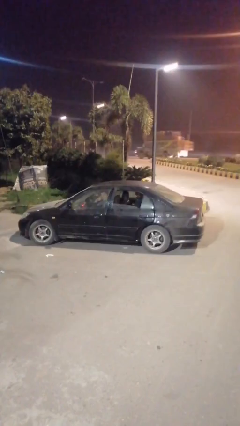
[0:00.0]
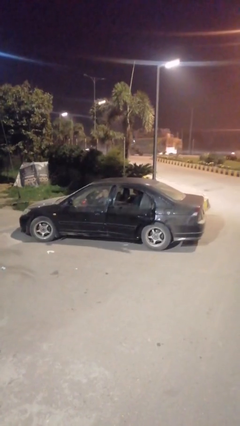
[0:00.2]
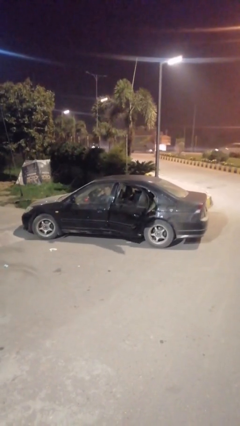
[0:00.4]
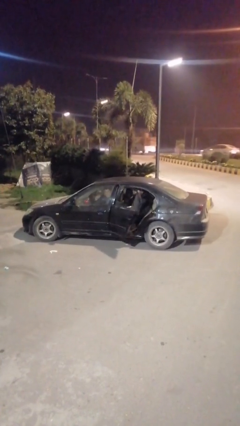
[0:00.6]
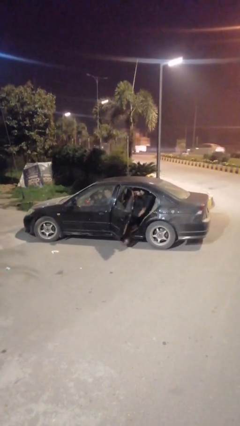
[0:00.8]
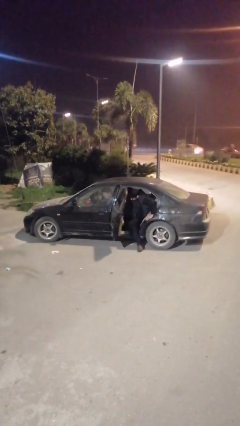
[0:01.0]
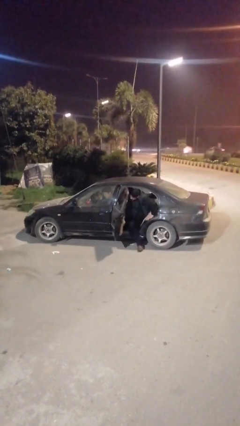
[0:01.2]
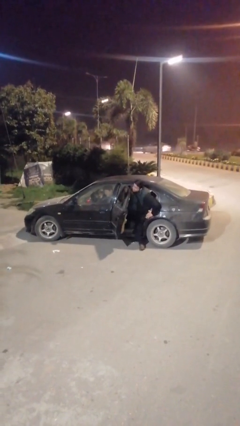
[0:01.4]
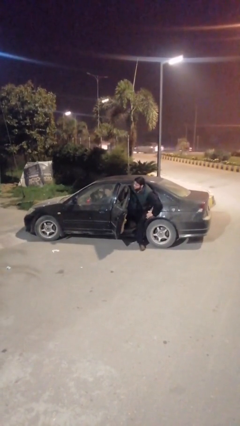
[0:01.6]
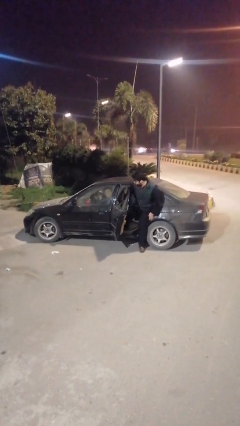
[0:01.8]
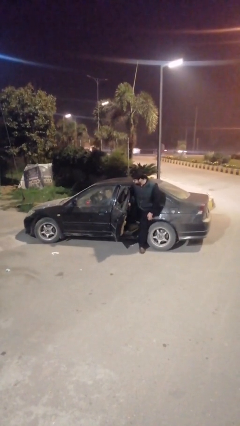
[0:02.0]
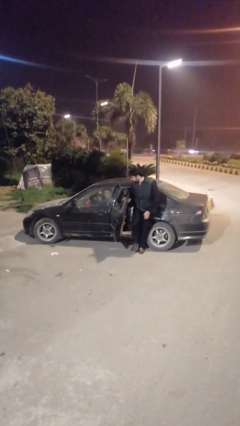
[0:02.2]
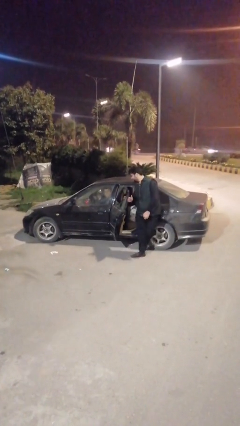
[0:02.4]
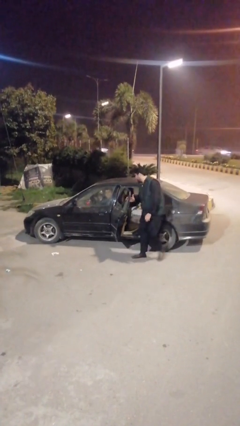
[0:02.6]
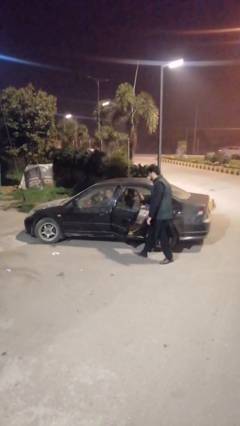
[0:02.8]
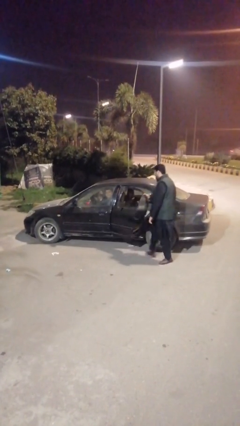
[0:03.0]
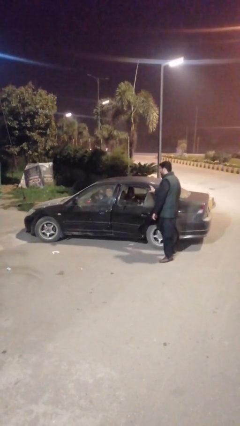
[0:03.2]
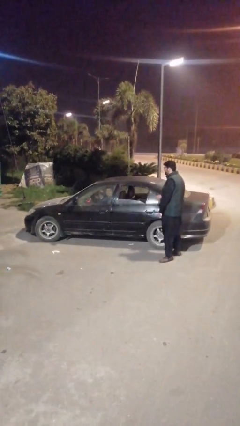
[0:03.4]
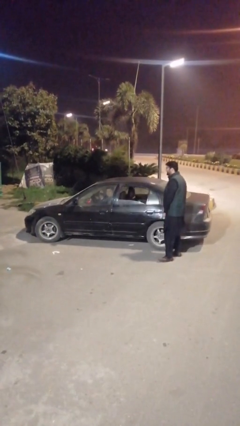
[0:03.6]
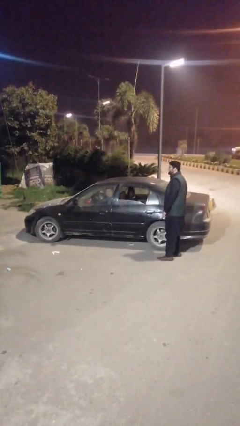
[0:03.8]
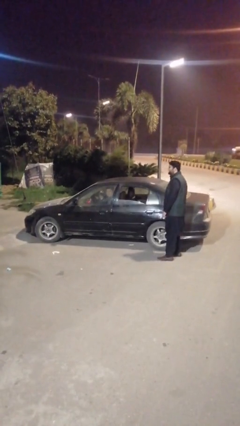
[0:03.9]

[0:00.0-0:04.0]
car drops off person

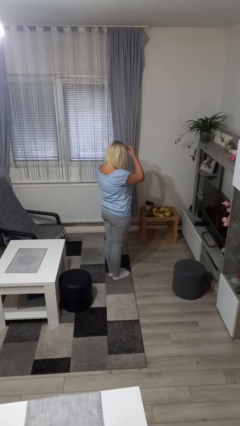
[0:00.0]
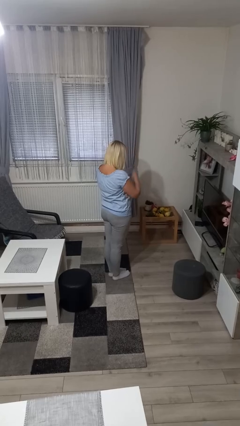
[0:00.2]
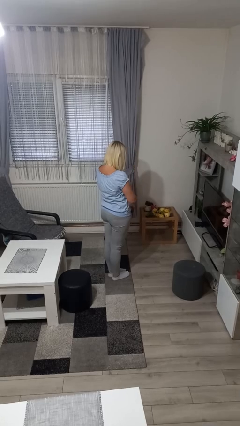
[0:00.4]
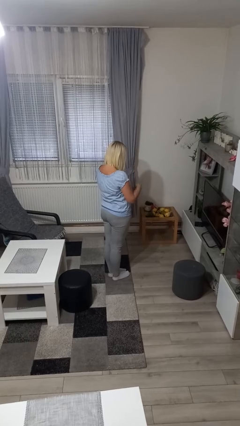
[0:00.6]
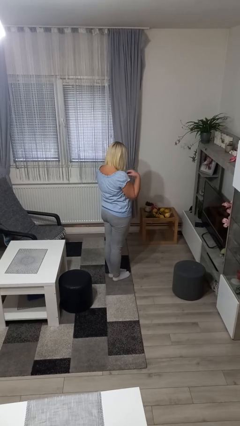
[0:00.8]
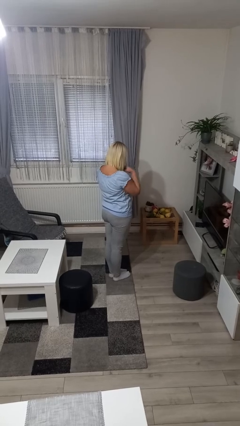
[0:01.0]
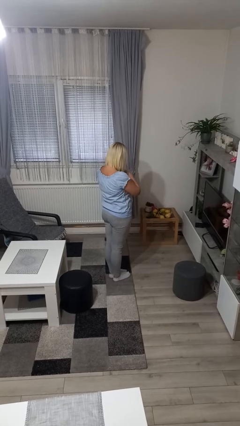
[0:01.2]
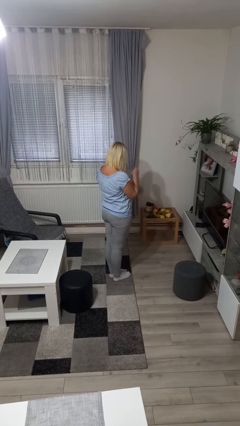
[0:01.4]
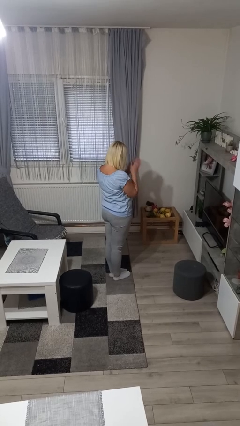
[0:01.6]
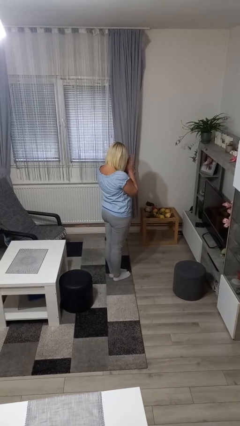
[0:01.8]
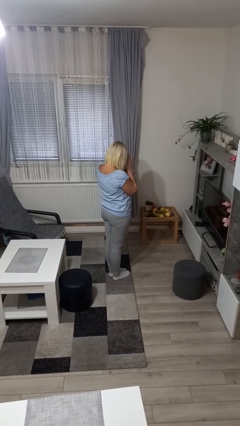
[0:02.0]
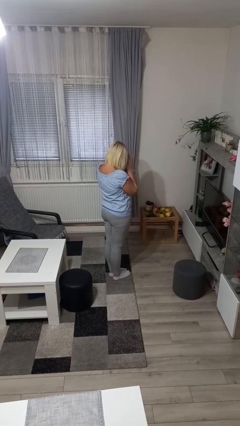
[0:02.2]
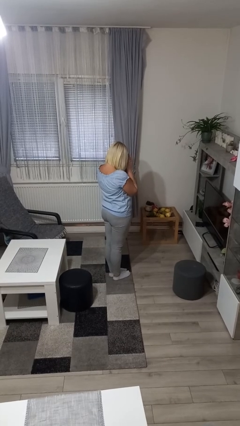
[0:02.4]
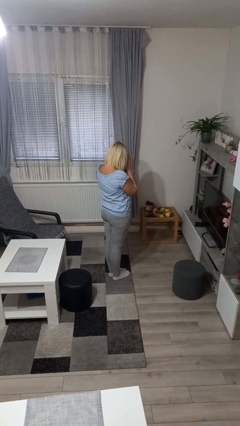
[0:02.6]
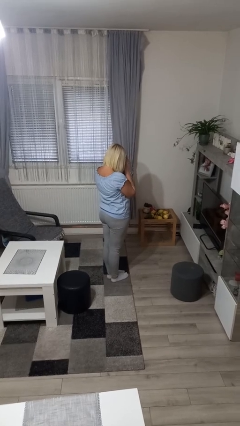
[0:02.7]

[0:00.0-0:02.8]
person prays

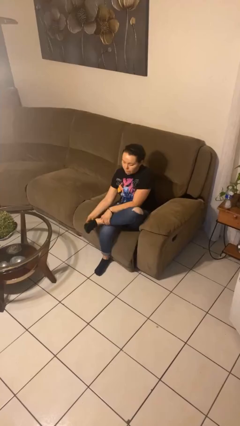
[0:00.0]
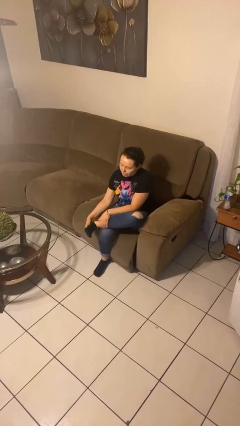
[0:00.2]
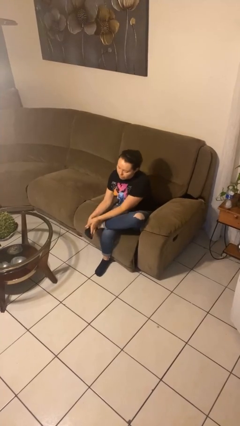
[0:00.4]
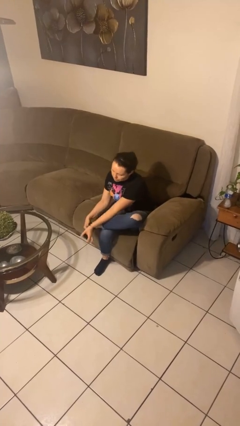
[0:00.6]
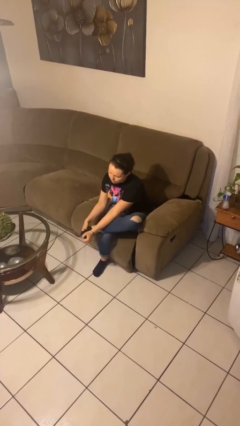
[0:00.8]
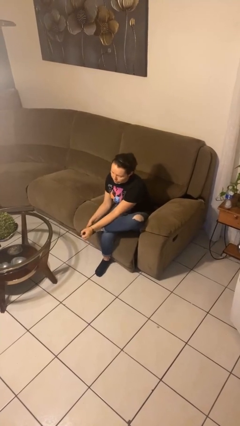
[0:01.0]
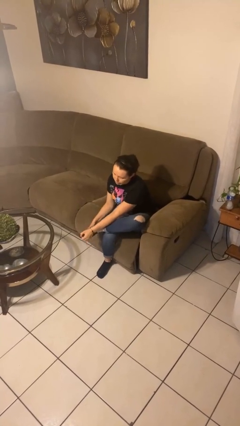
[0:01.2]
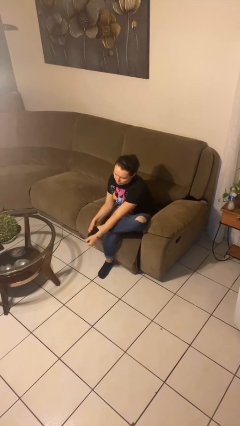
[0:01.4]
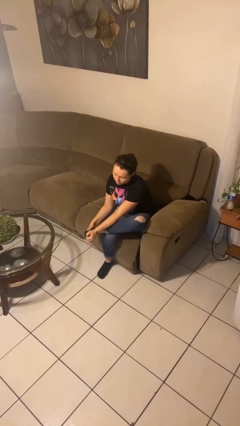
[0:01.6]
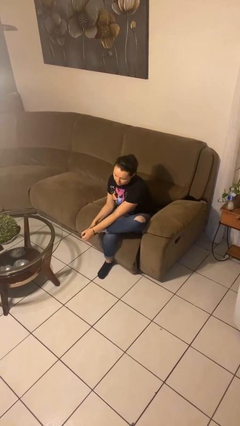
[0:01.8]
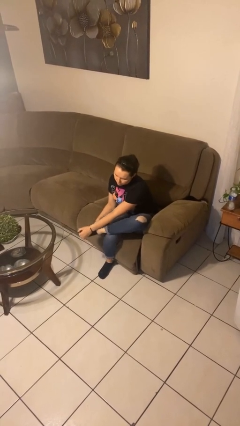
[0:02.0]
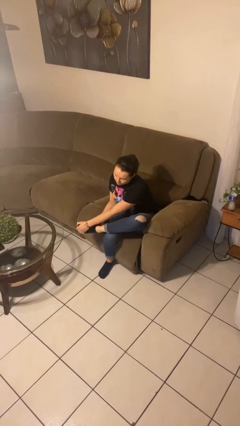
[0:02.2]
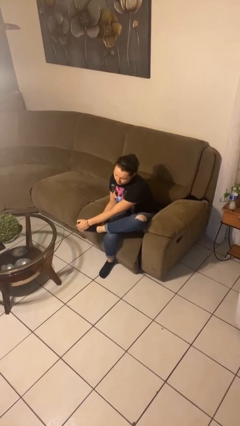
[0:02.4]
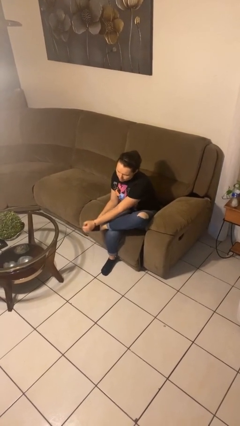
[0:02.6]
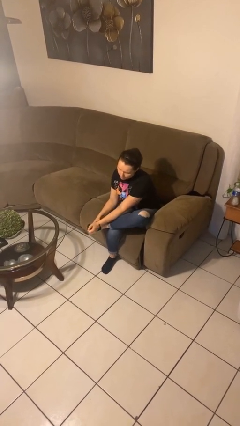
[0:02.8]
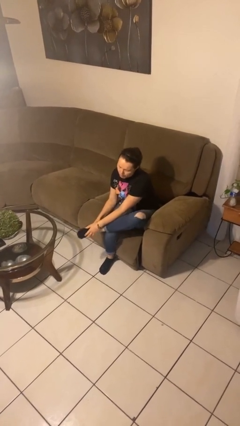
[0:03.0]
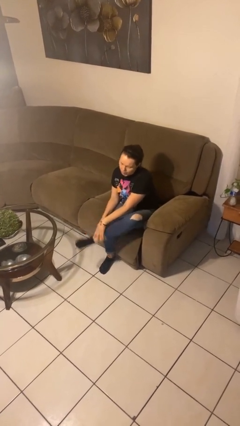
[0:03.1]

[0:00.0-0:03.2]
person rubs foot

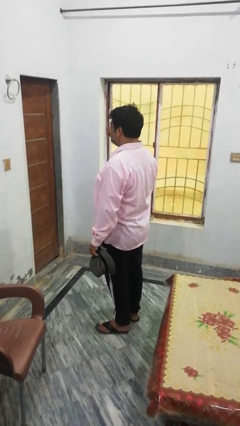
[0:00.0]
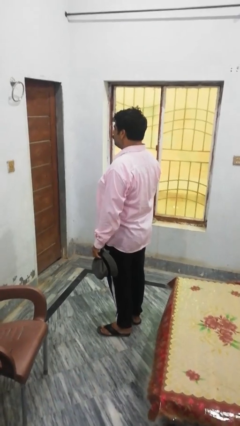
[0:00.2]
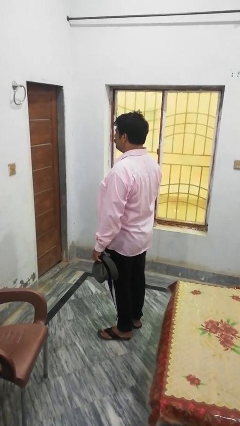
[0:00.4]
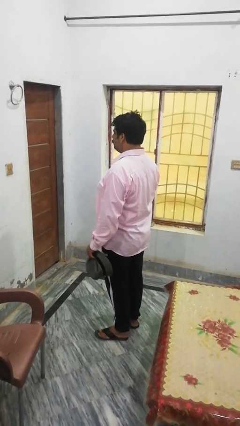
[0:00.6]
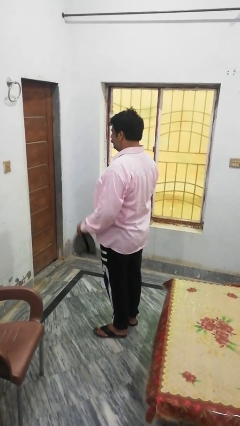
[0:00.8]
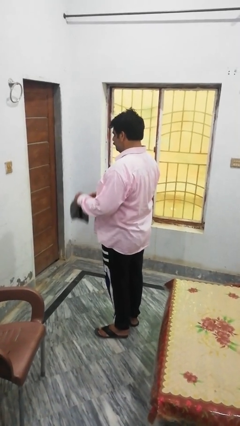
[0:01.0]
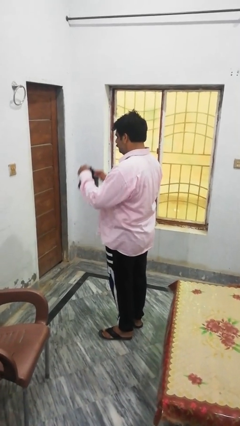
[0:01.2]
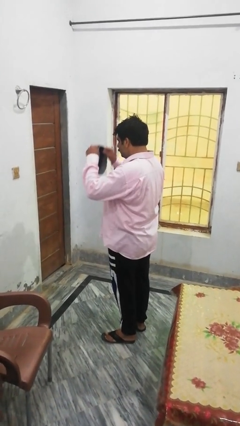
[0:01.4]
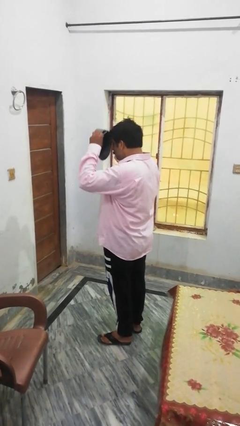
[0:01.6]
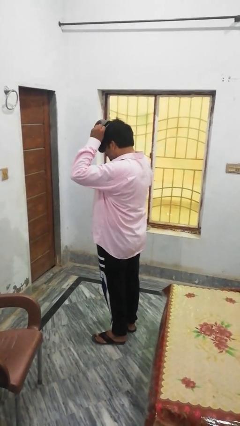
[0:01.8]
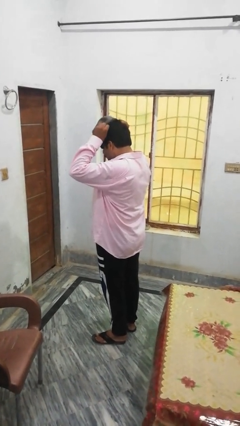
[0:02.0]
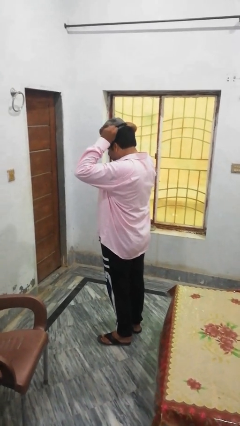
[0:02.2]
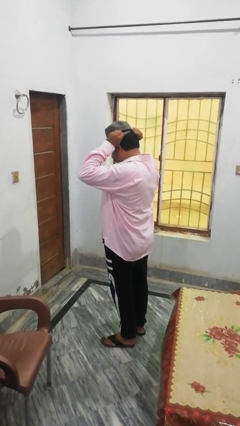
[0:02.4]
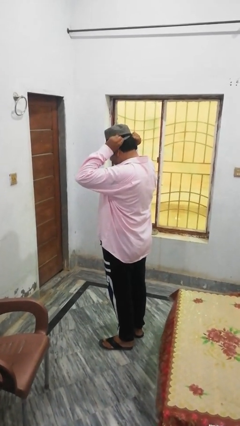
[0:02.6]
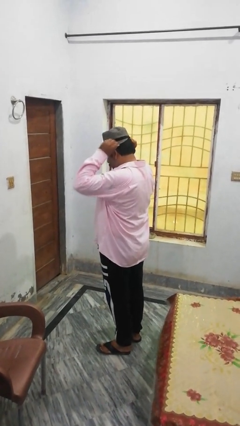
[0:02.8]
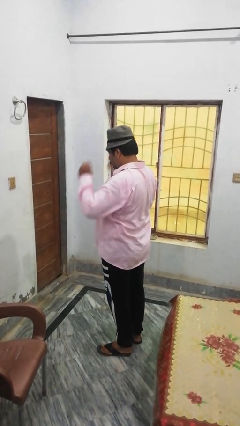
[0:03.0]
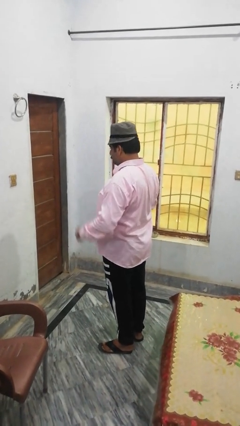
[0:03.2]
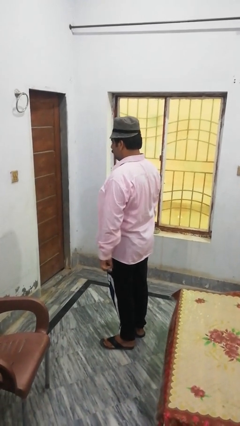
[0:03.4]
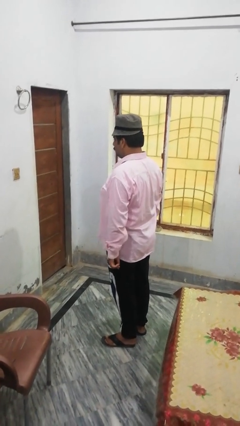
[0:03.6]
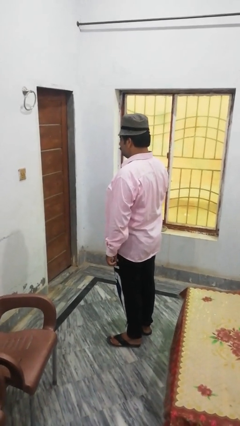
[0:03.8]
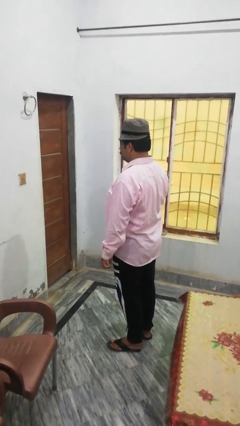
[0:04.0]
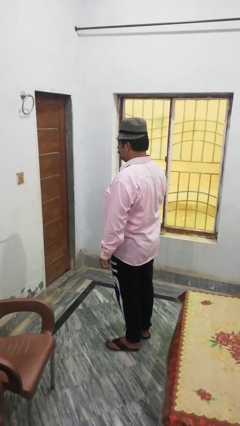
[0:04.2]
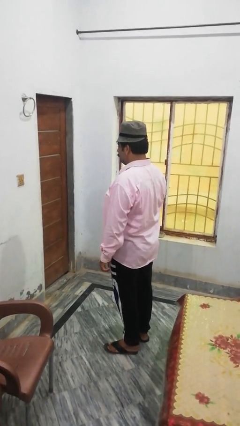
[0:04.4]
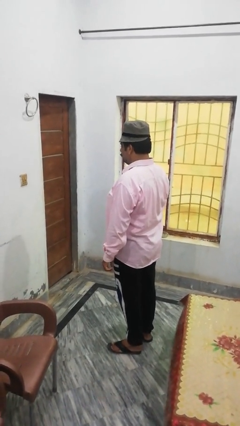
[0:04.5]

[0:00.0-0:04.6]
person puts on hat

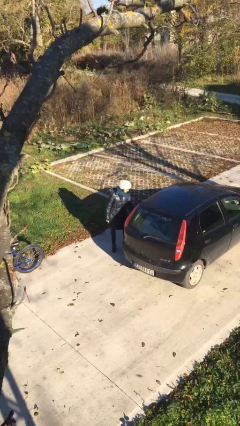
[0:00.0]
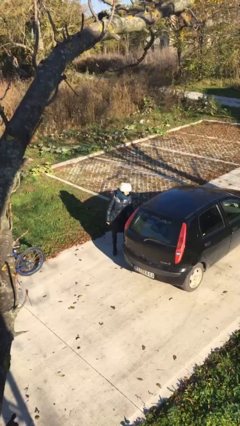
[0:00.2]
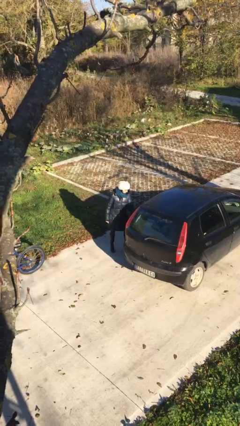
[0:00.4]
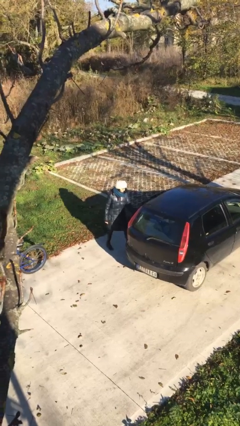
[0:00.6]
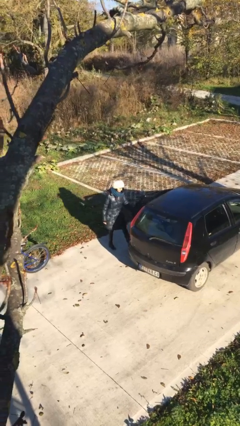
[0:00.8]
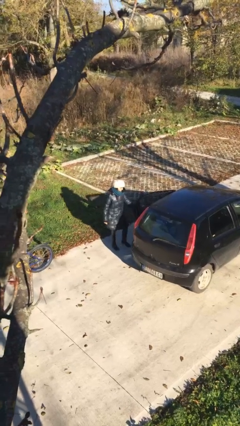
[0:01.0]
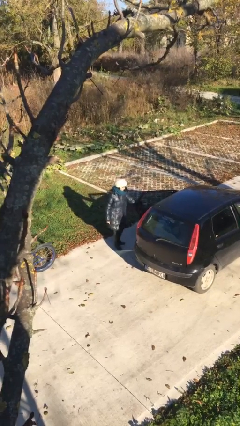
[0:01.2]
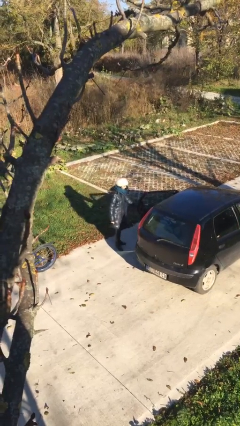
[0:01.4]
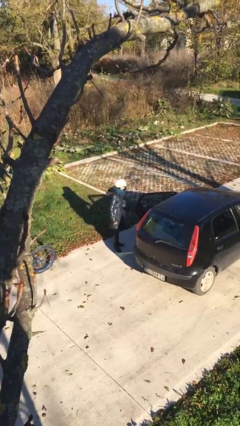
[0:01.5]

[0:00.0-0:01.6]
person opens car door

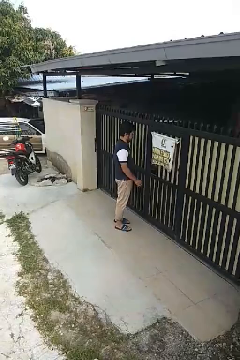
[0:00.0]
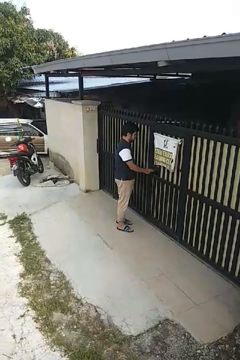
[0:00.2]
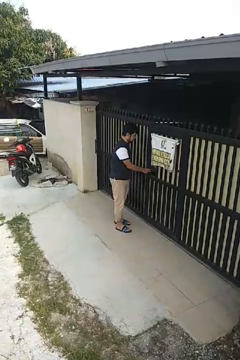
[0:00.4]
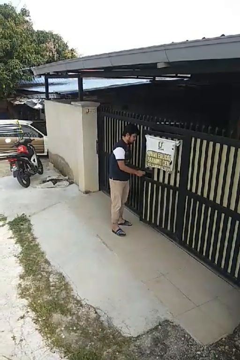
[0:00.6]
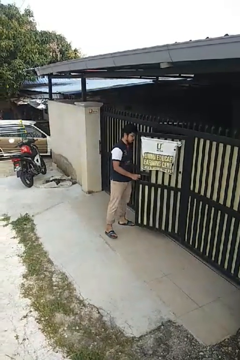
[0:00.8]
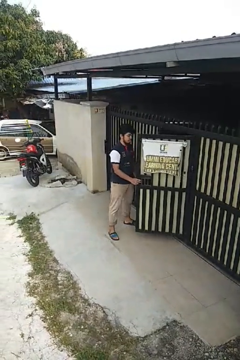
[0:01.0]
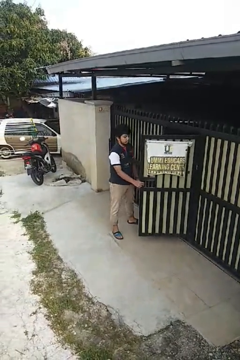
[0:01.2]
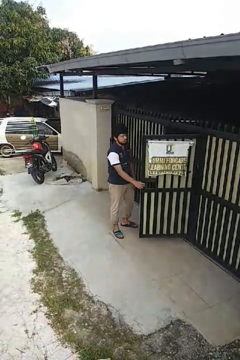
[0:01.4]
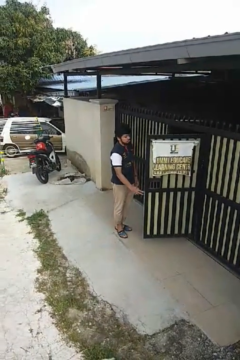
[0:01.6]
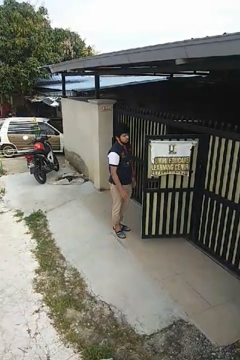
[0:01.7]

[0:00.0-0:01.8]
person opens gate
